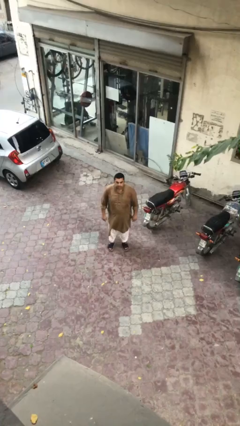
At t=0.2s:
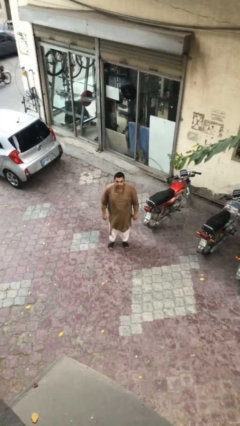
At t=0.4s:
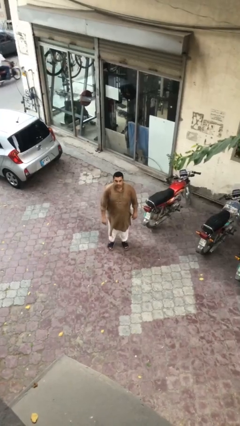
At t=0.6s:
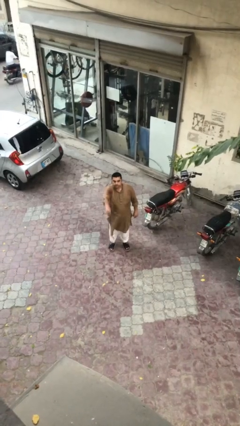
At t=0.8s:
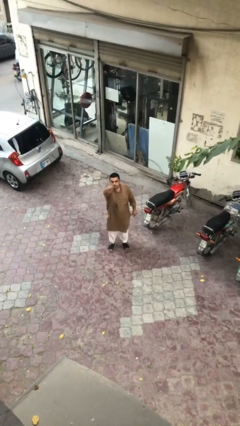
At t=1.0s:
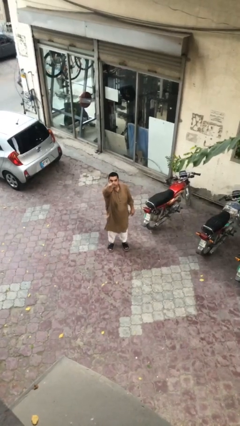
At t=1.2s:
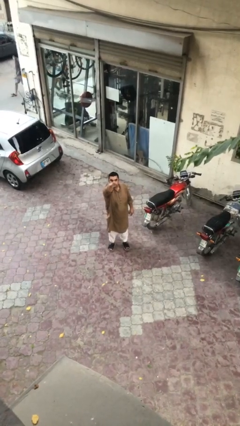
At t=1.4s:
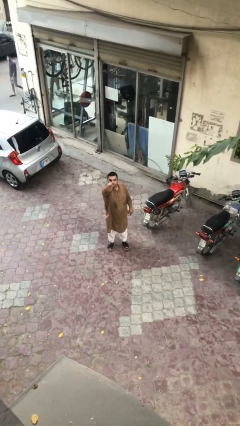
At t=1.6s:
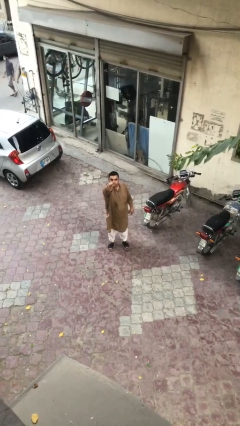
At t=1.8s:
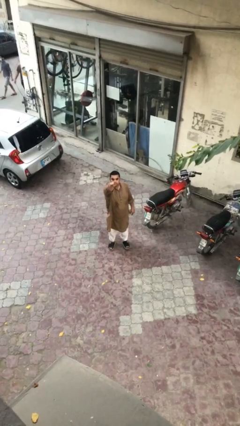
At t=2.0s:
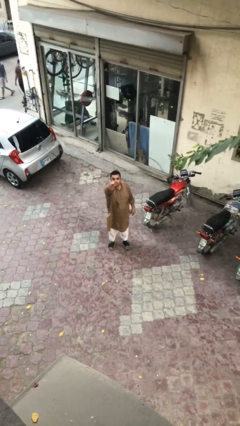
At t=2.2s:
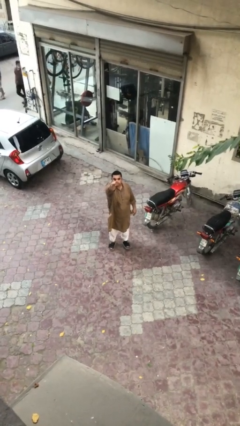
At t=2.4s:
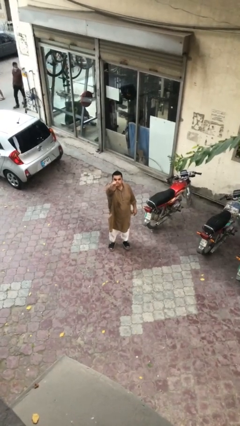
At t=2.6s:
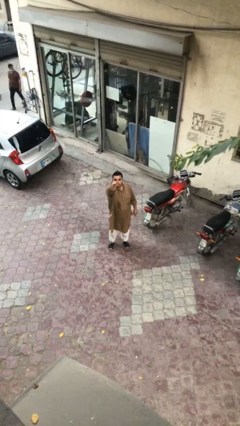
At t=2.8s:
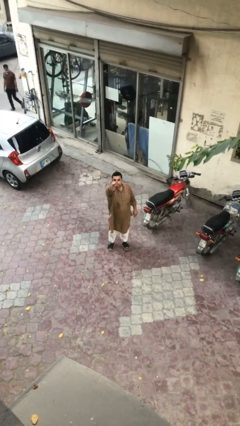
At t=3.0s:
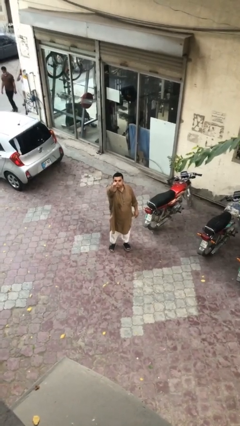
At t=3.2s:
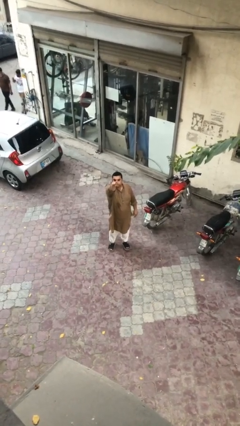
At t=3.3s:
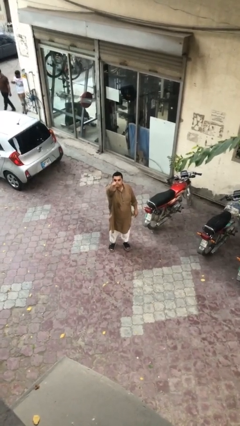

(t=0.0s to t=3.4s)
person points at person

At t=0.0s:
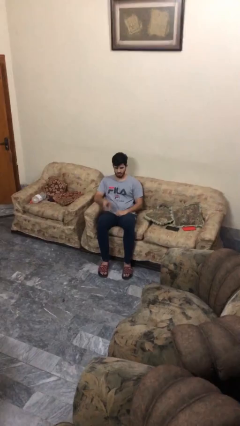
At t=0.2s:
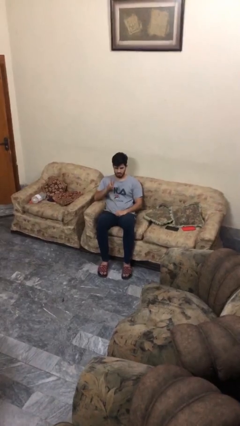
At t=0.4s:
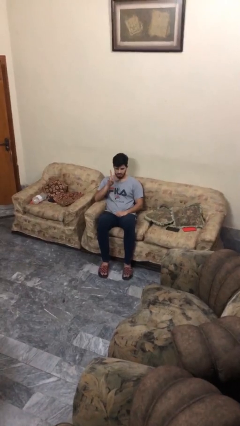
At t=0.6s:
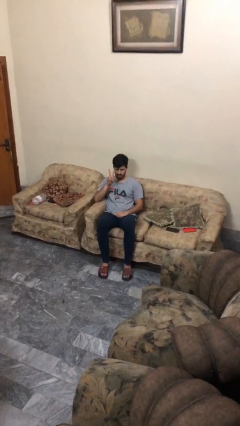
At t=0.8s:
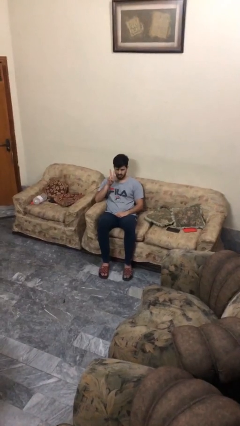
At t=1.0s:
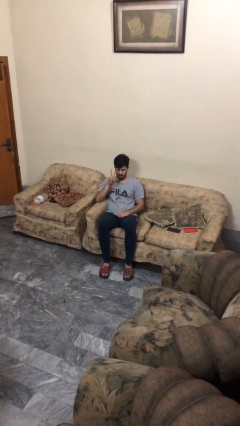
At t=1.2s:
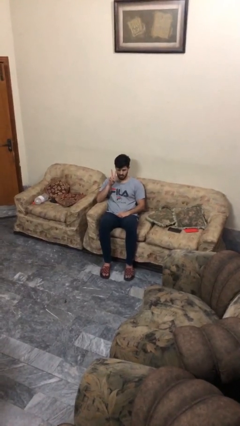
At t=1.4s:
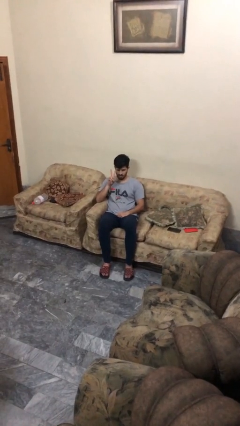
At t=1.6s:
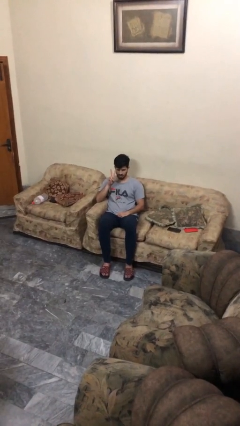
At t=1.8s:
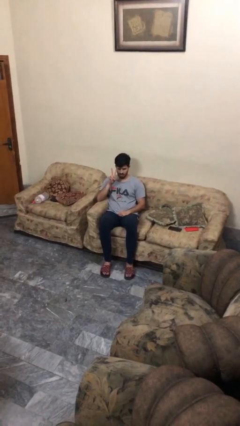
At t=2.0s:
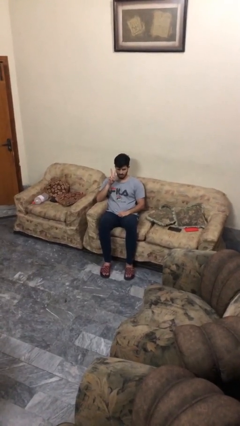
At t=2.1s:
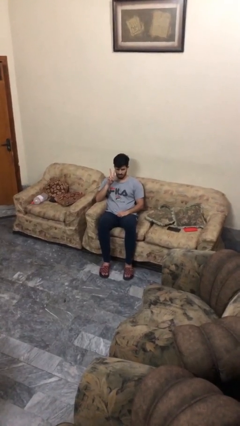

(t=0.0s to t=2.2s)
person gestures peace

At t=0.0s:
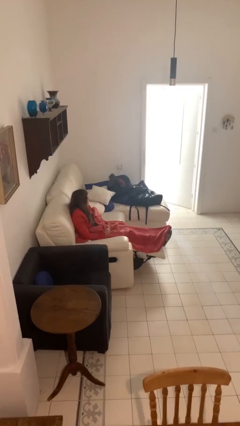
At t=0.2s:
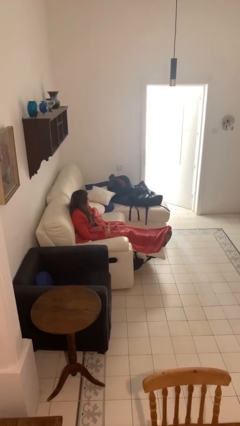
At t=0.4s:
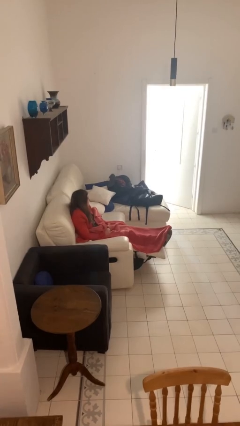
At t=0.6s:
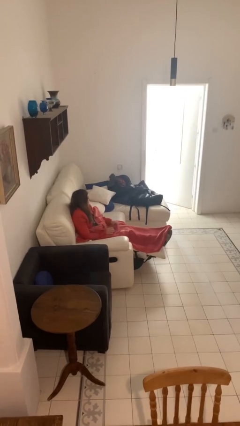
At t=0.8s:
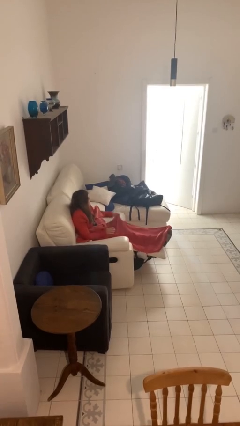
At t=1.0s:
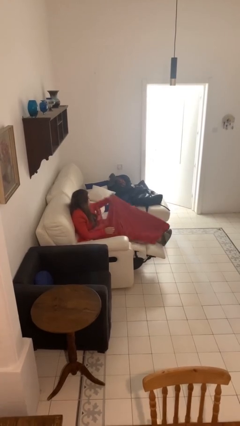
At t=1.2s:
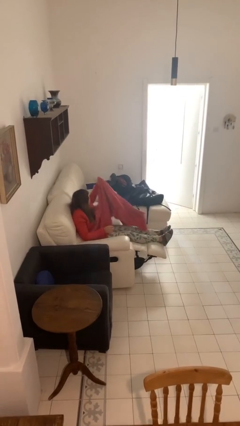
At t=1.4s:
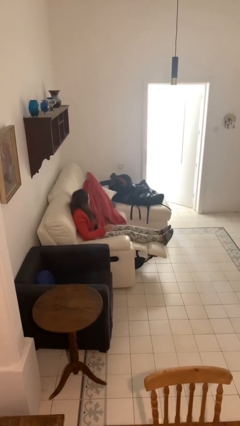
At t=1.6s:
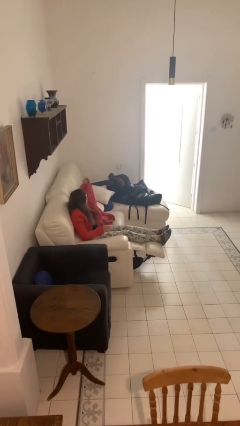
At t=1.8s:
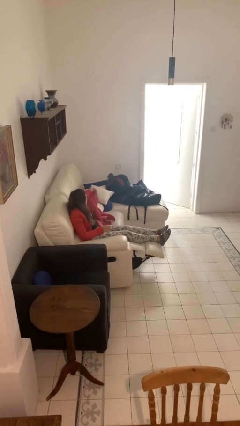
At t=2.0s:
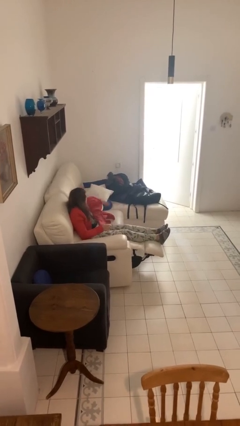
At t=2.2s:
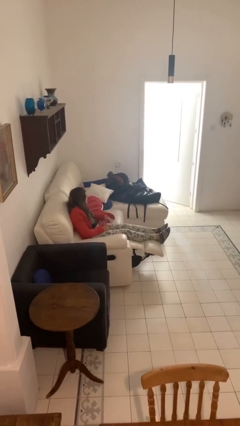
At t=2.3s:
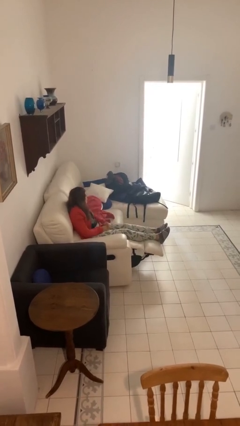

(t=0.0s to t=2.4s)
person uncovers with blanket

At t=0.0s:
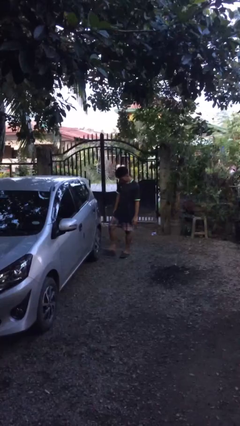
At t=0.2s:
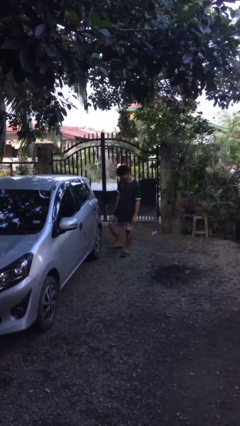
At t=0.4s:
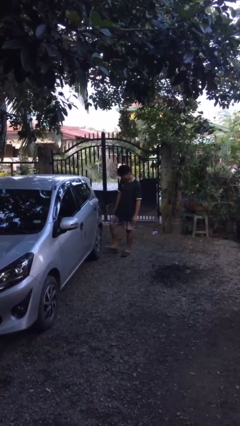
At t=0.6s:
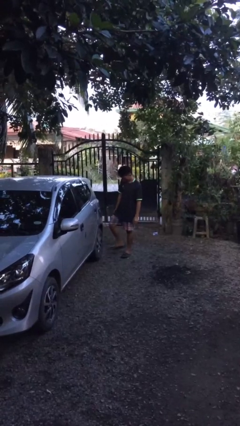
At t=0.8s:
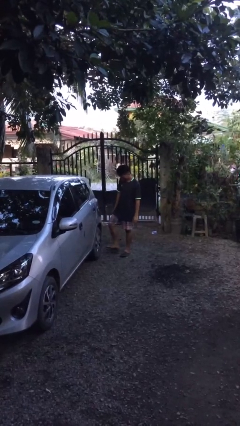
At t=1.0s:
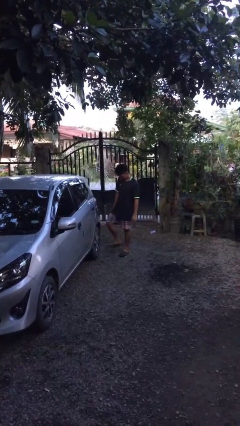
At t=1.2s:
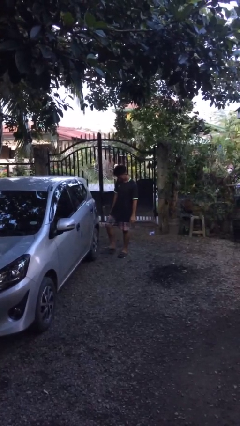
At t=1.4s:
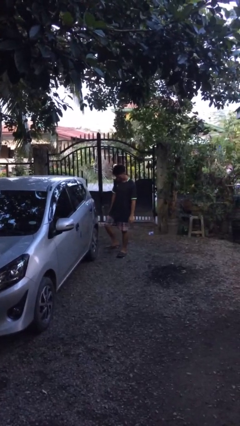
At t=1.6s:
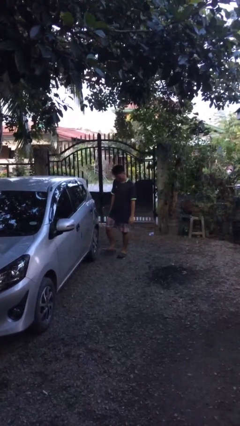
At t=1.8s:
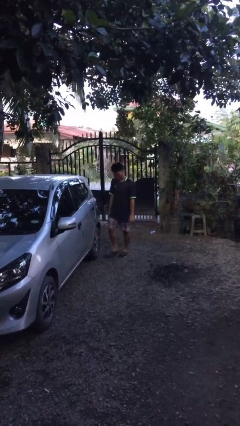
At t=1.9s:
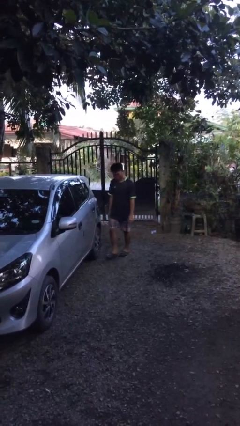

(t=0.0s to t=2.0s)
person kicks car tires

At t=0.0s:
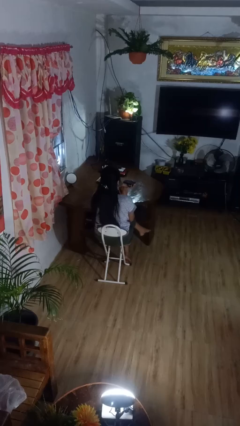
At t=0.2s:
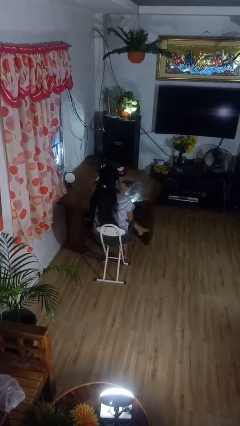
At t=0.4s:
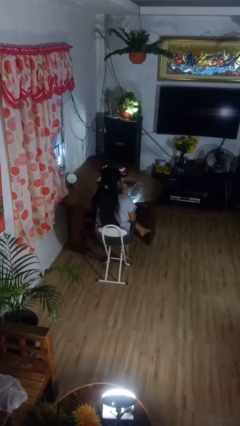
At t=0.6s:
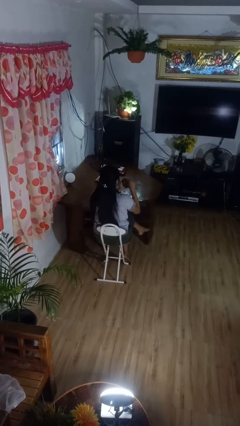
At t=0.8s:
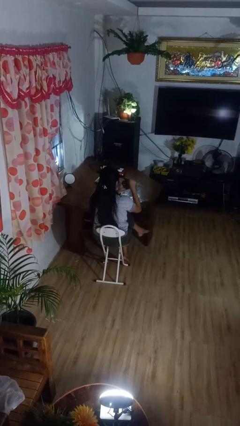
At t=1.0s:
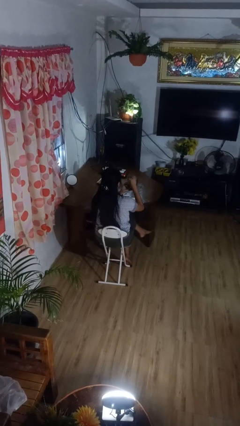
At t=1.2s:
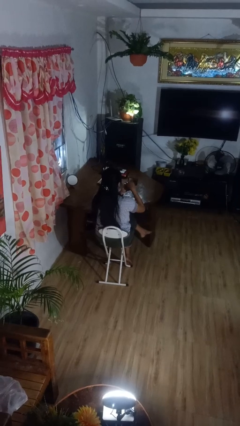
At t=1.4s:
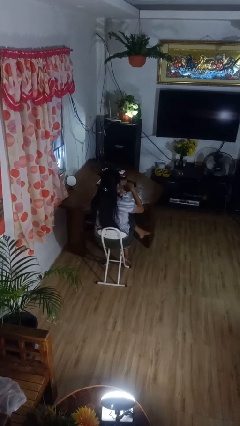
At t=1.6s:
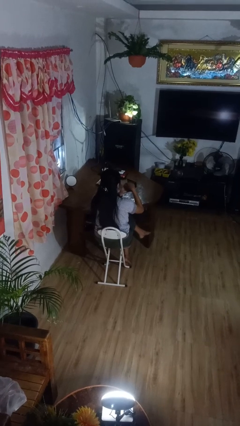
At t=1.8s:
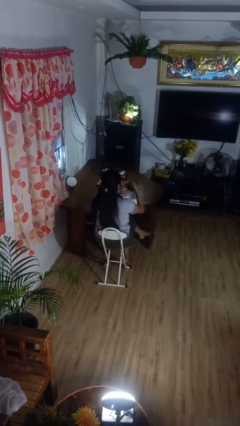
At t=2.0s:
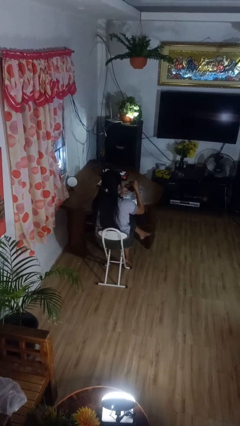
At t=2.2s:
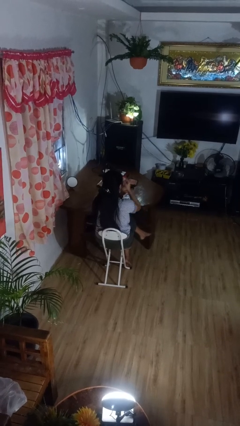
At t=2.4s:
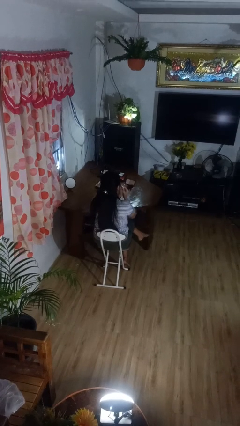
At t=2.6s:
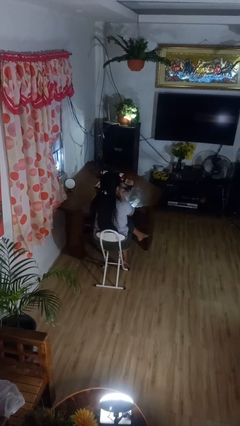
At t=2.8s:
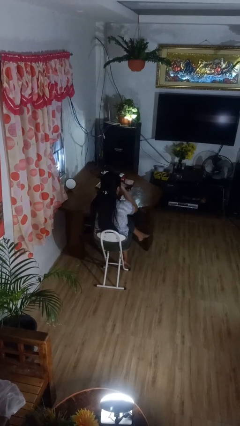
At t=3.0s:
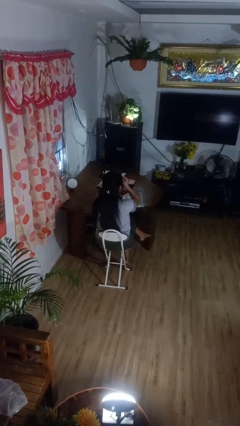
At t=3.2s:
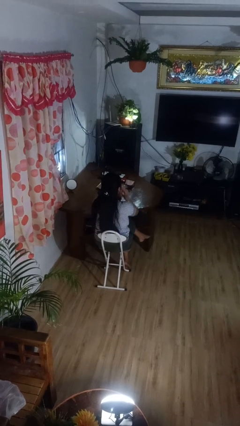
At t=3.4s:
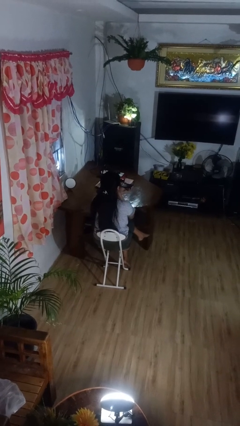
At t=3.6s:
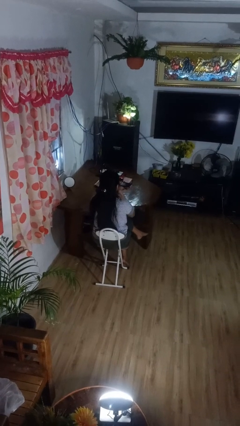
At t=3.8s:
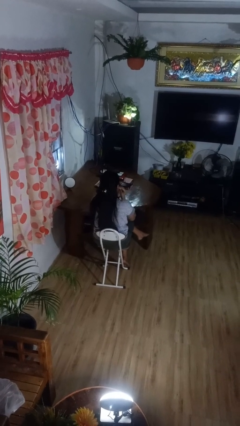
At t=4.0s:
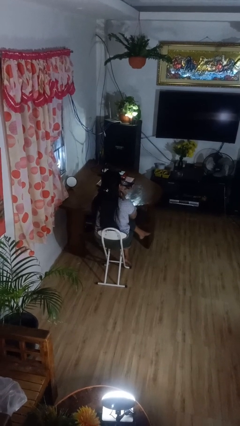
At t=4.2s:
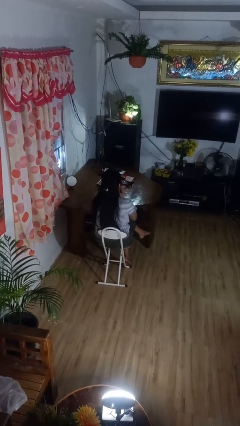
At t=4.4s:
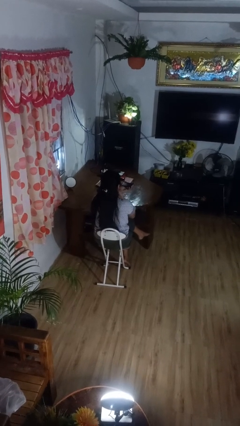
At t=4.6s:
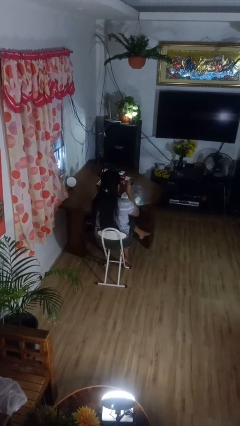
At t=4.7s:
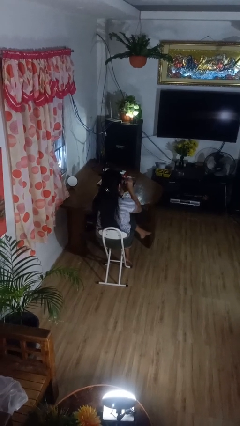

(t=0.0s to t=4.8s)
person applies foundation makeup

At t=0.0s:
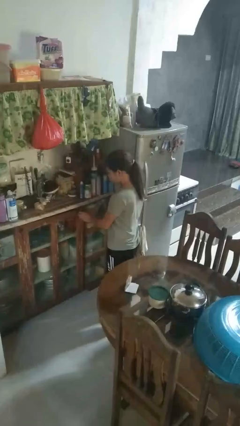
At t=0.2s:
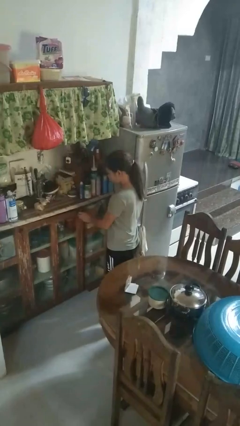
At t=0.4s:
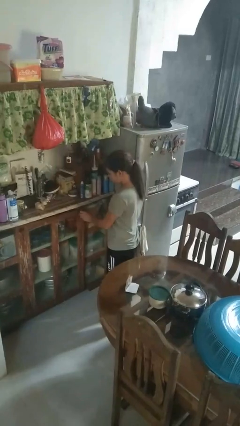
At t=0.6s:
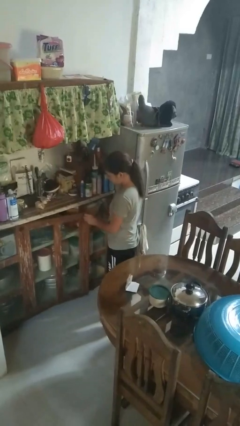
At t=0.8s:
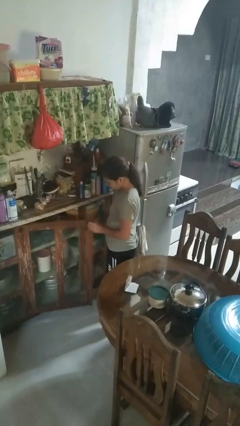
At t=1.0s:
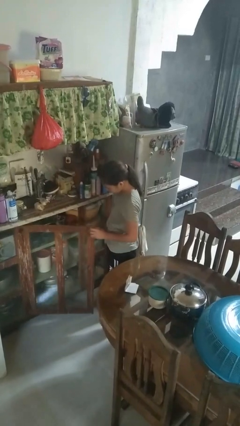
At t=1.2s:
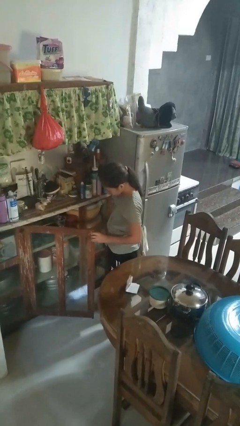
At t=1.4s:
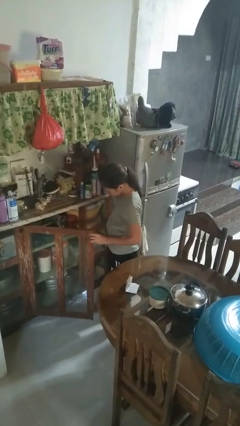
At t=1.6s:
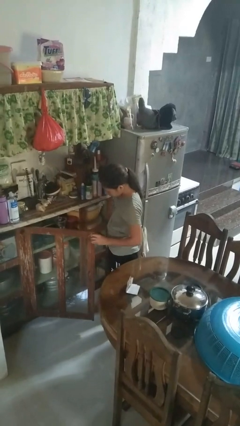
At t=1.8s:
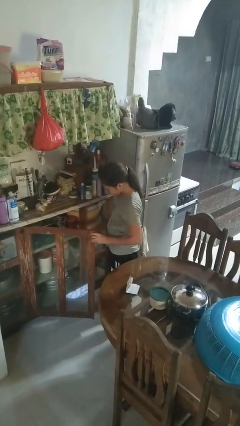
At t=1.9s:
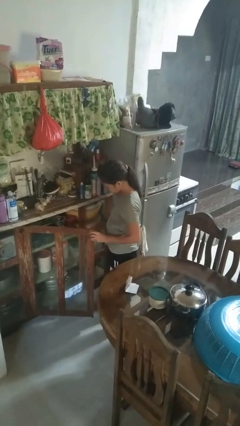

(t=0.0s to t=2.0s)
person opens cabinet

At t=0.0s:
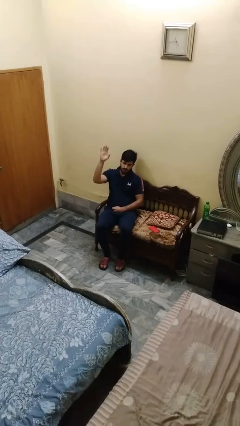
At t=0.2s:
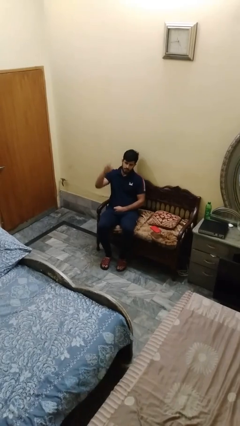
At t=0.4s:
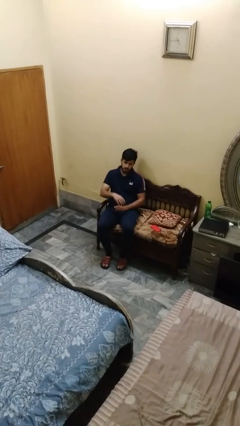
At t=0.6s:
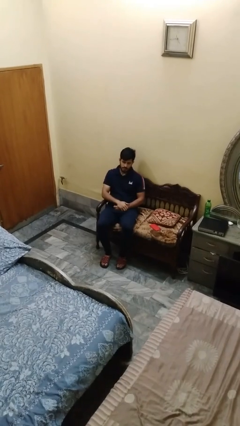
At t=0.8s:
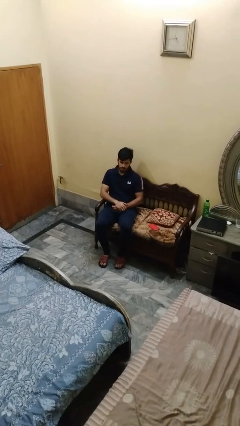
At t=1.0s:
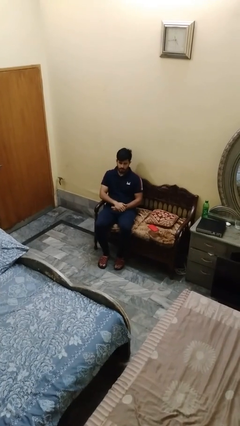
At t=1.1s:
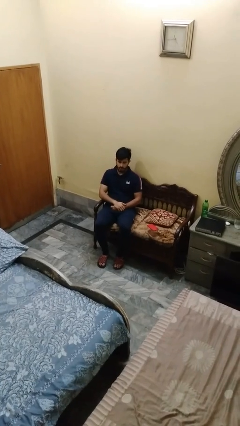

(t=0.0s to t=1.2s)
person gestures lower hand
